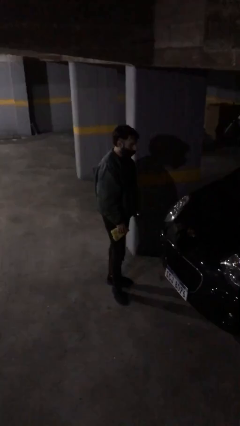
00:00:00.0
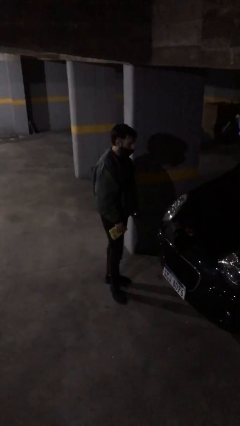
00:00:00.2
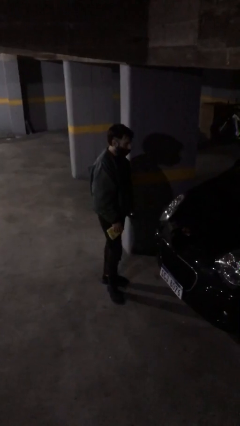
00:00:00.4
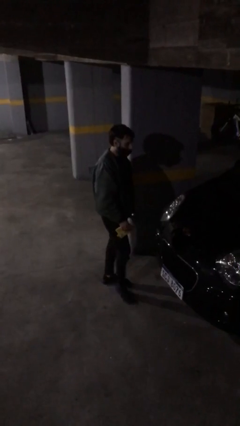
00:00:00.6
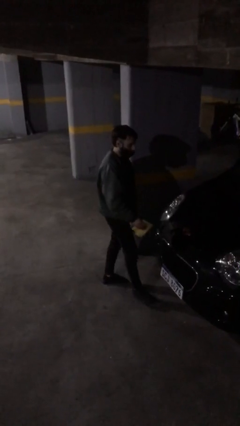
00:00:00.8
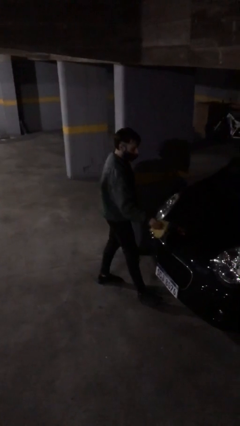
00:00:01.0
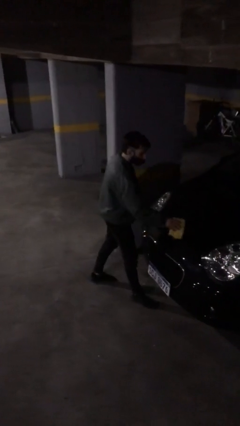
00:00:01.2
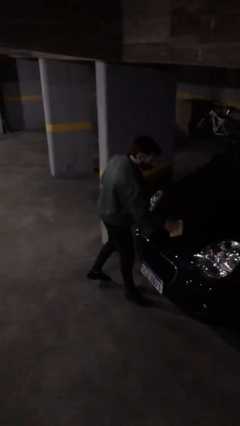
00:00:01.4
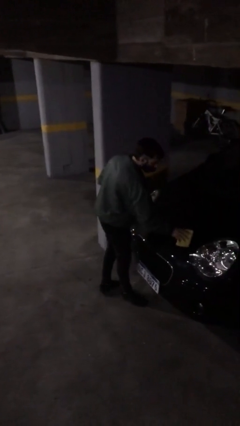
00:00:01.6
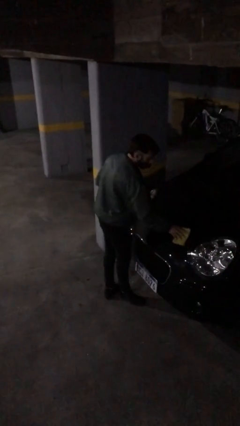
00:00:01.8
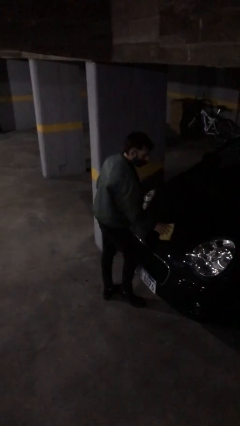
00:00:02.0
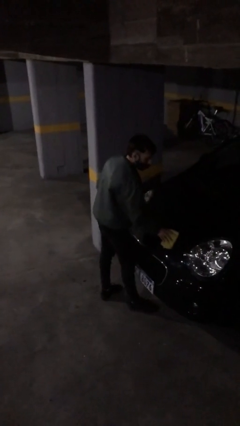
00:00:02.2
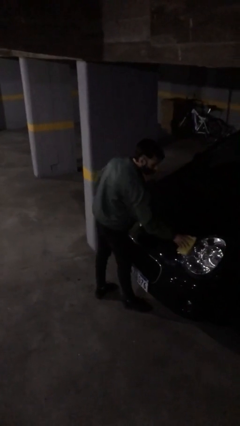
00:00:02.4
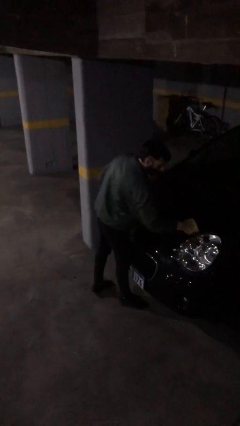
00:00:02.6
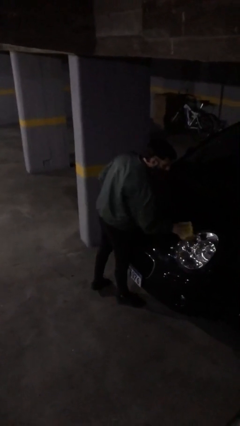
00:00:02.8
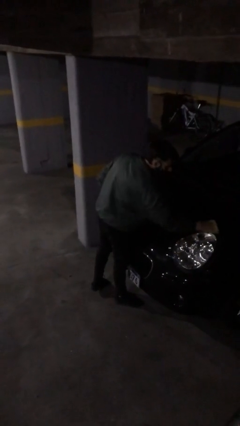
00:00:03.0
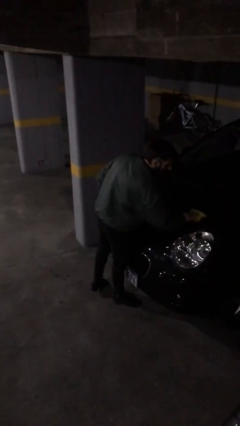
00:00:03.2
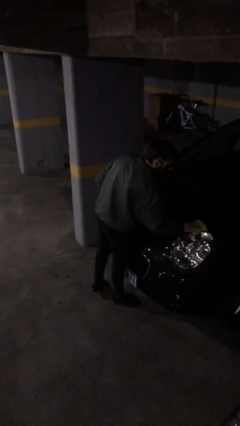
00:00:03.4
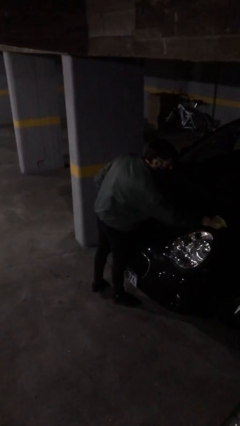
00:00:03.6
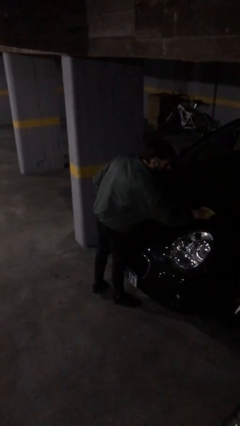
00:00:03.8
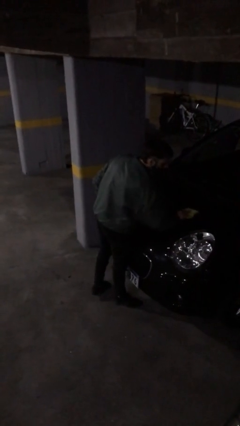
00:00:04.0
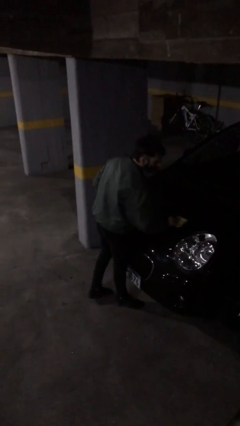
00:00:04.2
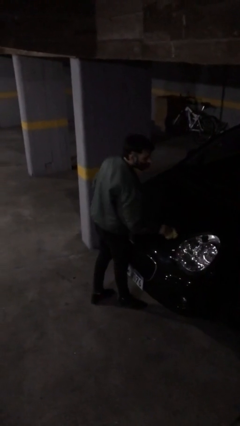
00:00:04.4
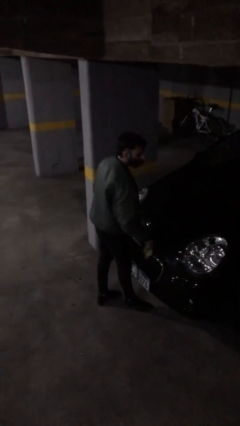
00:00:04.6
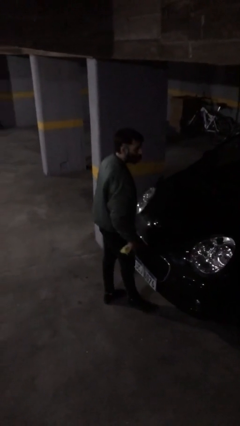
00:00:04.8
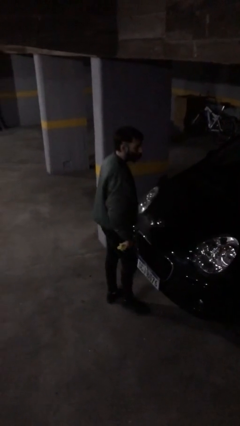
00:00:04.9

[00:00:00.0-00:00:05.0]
person polishes car with rag

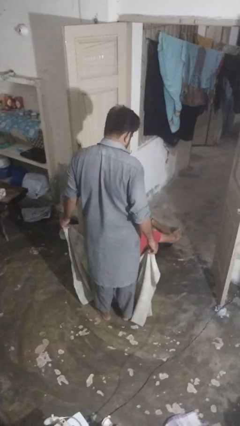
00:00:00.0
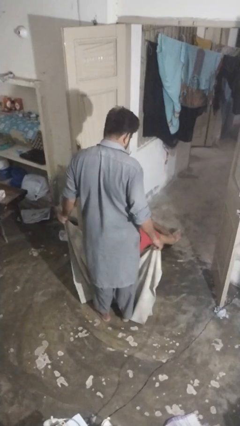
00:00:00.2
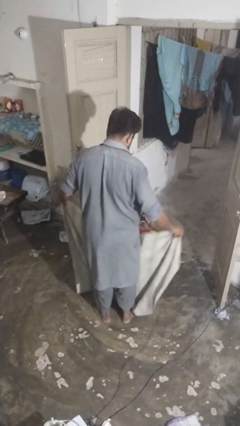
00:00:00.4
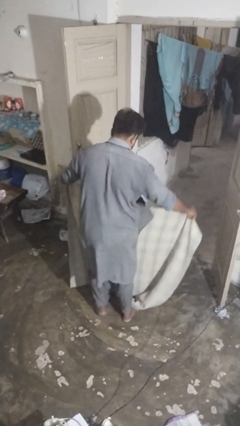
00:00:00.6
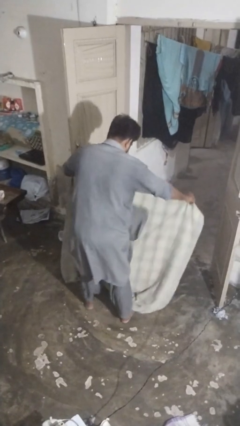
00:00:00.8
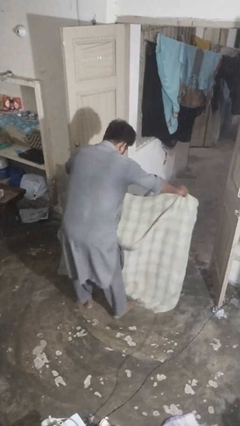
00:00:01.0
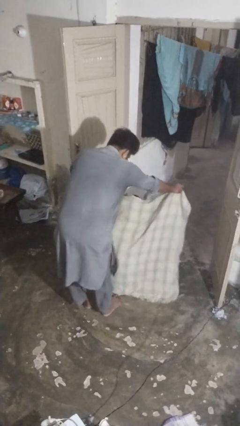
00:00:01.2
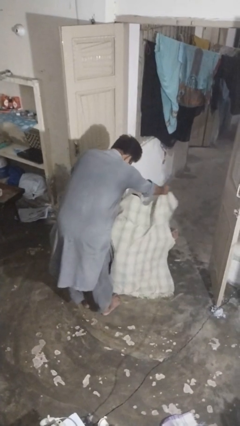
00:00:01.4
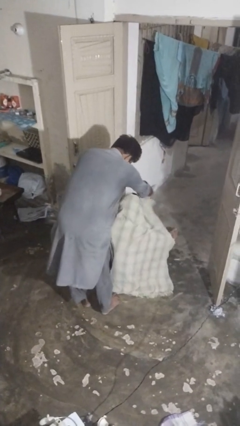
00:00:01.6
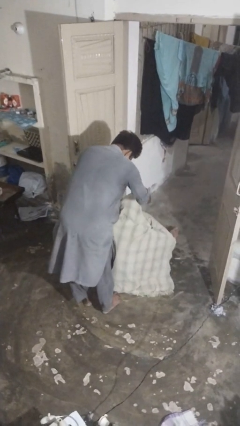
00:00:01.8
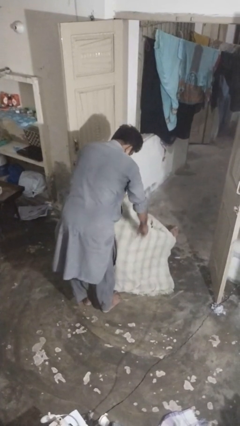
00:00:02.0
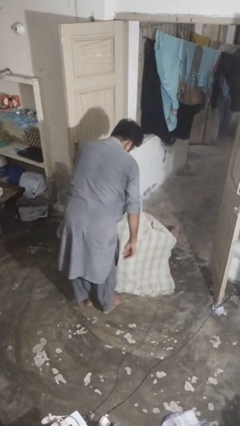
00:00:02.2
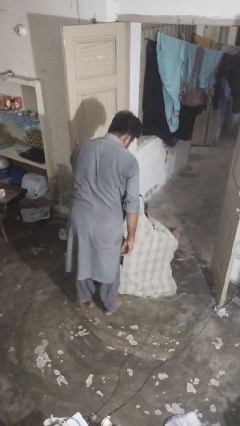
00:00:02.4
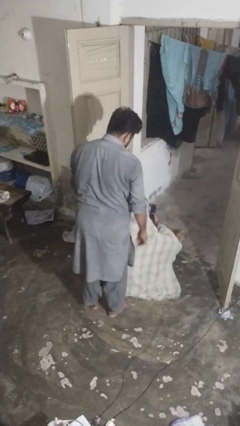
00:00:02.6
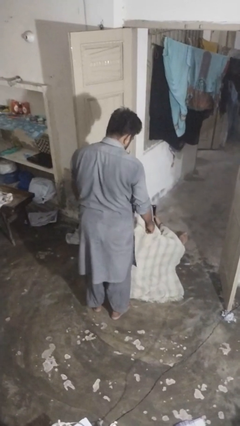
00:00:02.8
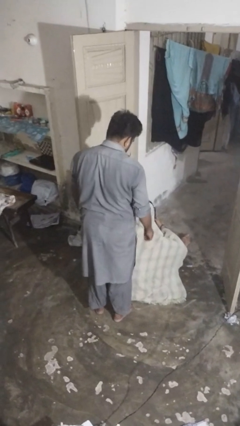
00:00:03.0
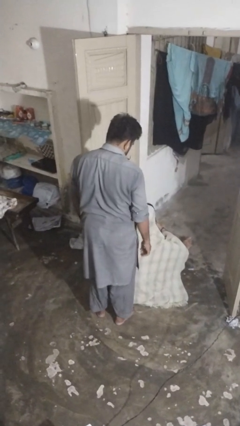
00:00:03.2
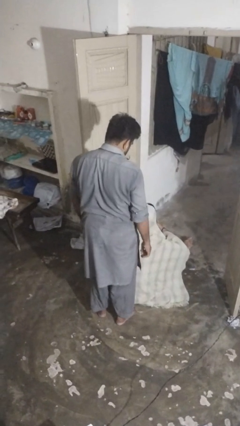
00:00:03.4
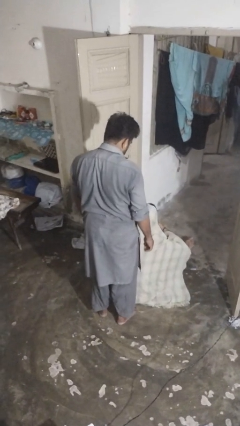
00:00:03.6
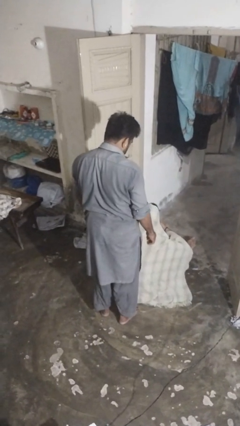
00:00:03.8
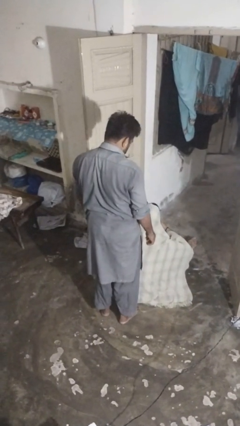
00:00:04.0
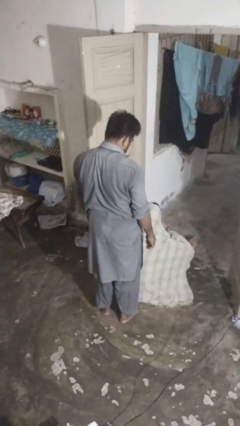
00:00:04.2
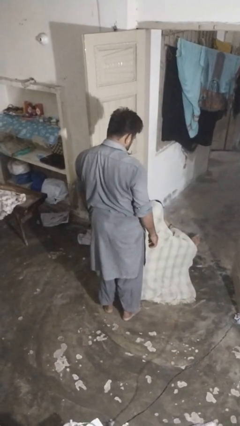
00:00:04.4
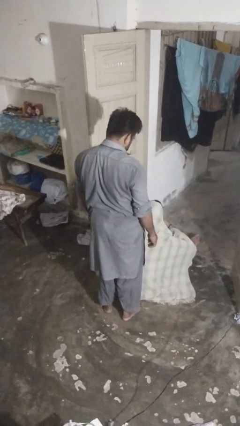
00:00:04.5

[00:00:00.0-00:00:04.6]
person covers friend with blanket

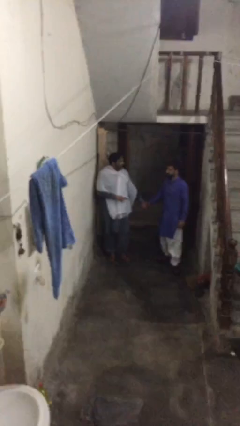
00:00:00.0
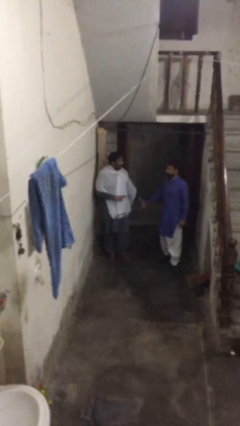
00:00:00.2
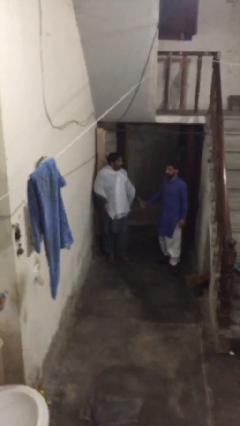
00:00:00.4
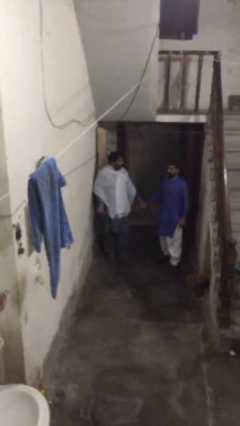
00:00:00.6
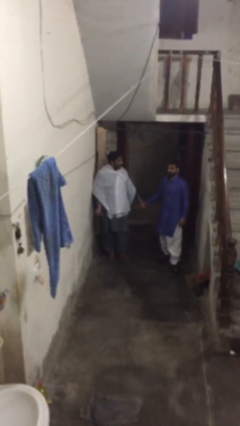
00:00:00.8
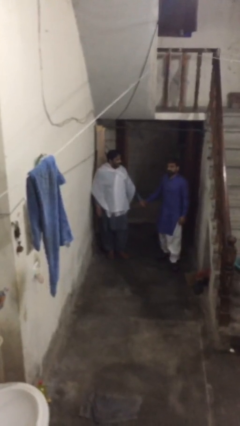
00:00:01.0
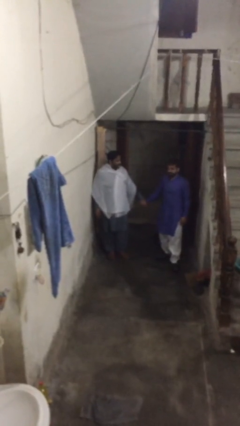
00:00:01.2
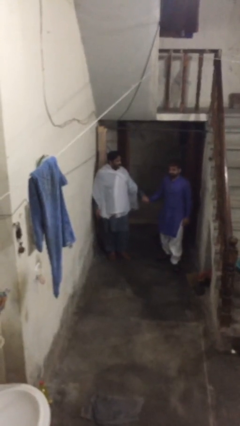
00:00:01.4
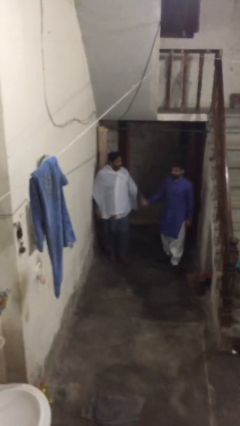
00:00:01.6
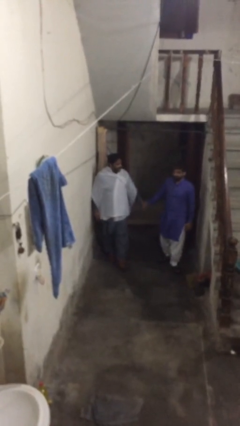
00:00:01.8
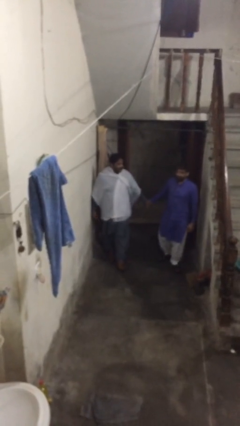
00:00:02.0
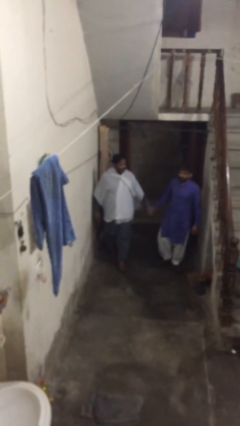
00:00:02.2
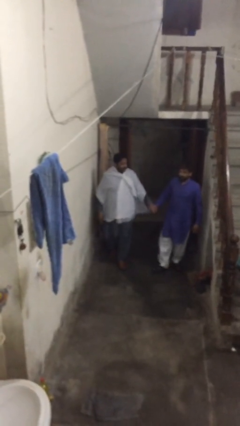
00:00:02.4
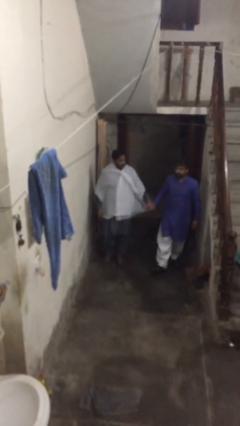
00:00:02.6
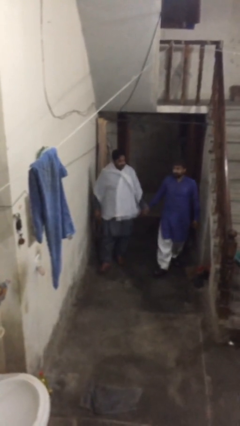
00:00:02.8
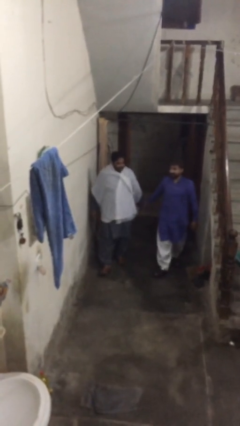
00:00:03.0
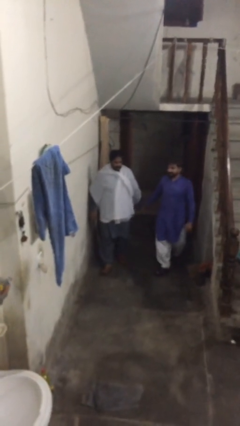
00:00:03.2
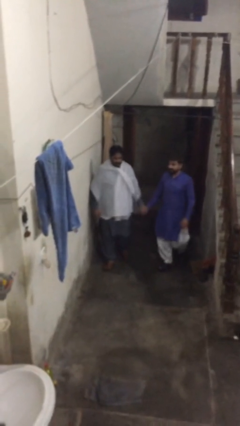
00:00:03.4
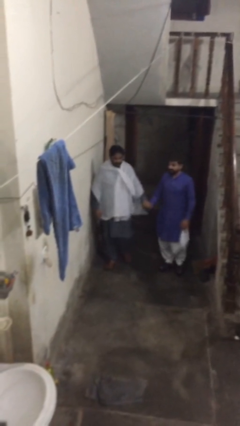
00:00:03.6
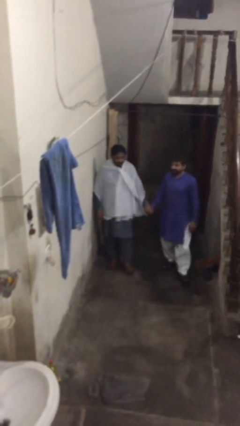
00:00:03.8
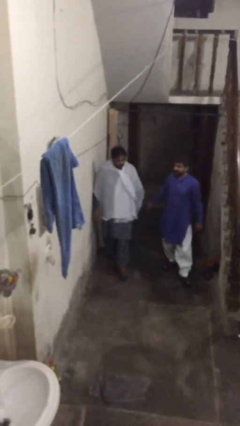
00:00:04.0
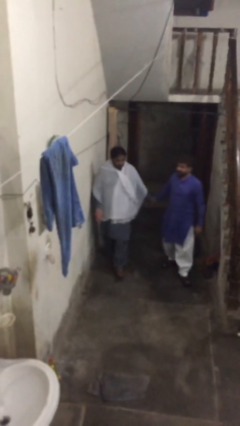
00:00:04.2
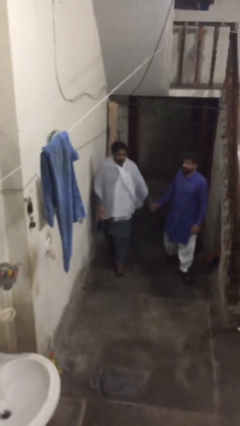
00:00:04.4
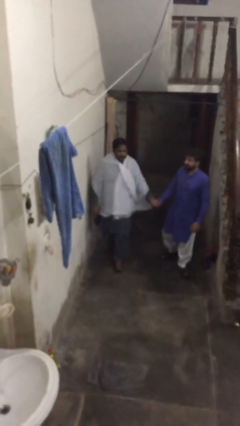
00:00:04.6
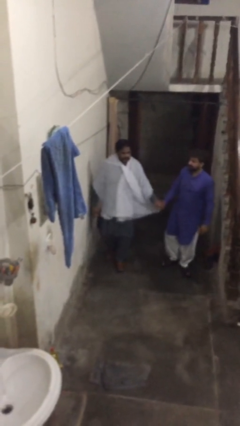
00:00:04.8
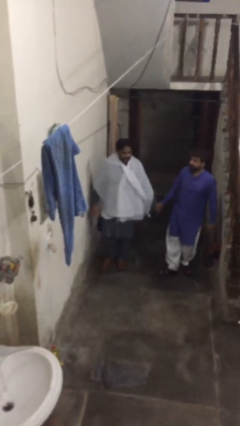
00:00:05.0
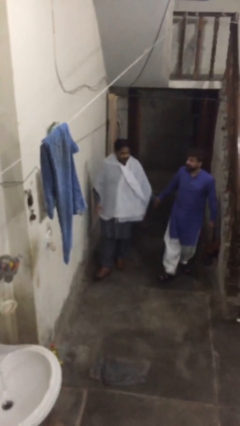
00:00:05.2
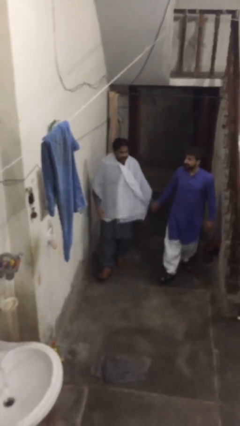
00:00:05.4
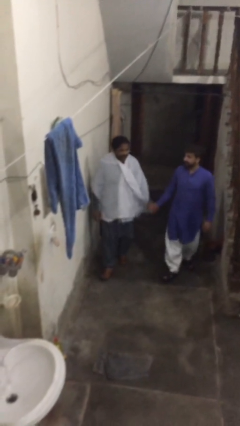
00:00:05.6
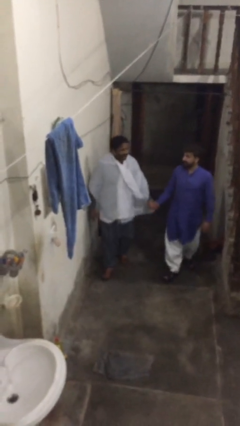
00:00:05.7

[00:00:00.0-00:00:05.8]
person holds hand

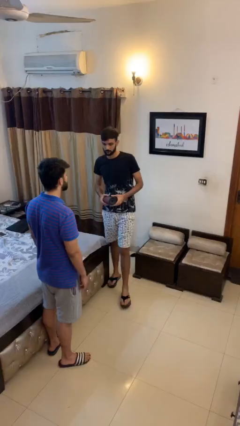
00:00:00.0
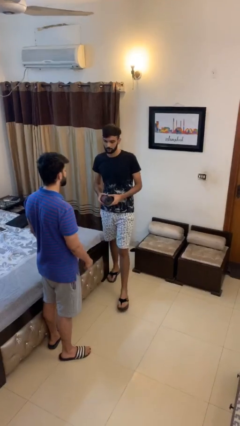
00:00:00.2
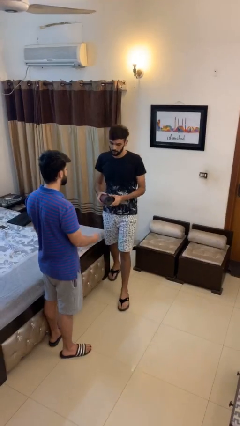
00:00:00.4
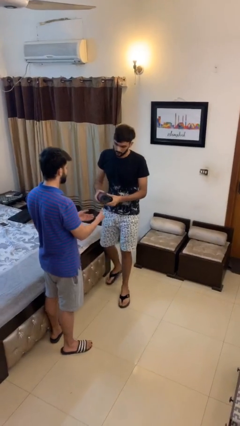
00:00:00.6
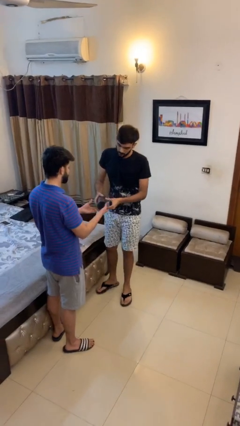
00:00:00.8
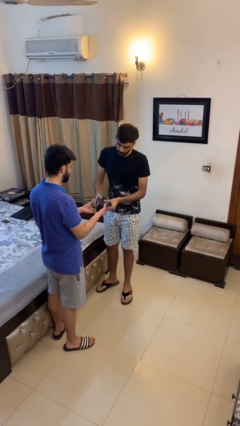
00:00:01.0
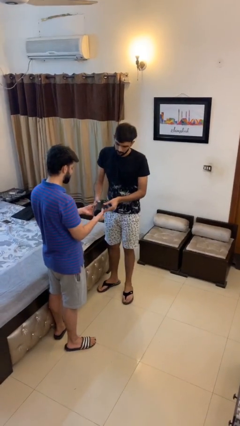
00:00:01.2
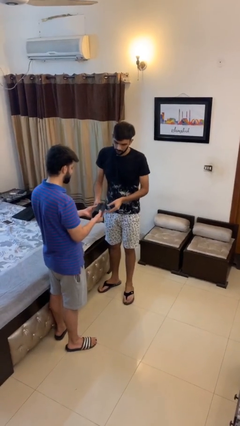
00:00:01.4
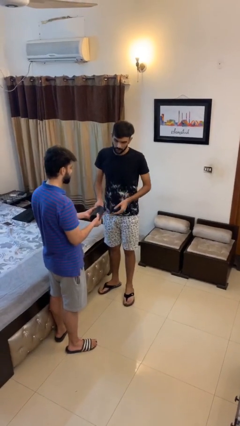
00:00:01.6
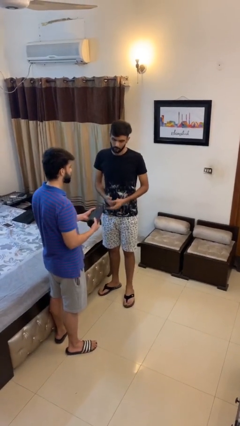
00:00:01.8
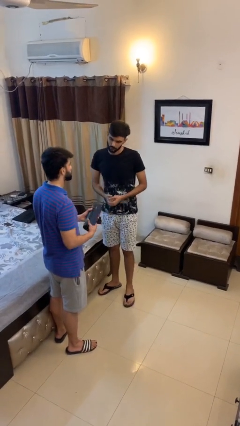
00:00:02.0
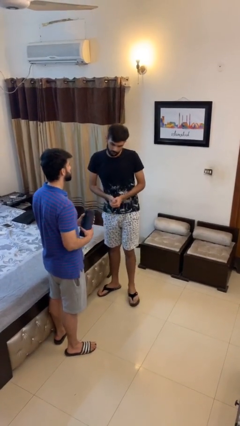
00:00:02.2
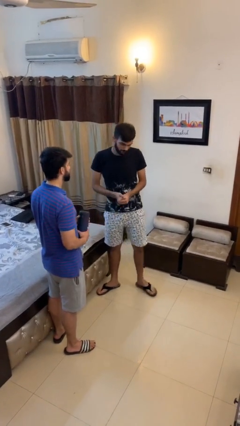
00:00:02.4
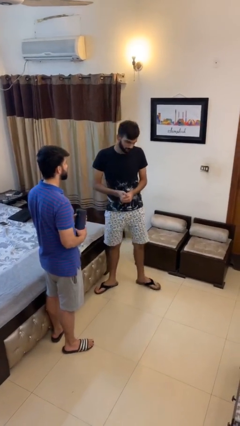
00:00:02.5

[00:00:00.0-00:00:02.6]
person transfers object to person
